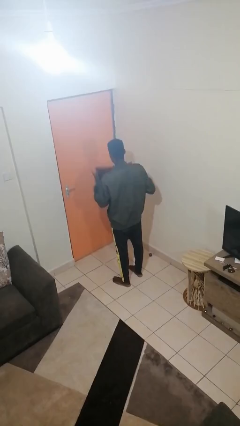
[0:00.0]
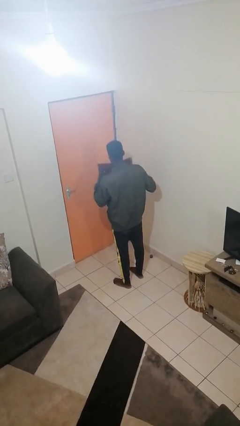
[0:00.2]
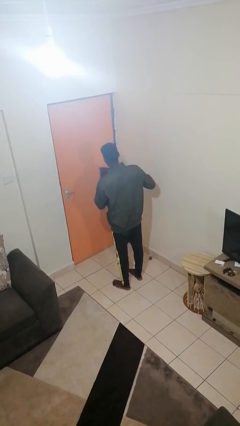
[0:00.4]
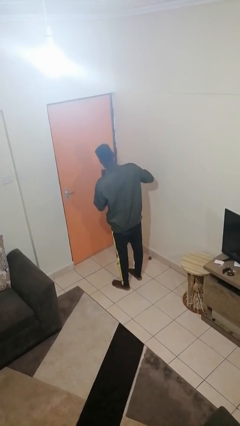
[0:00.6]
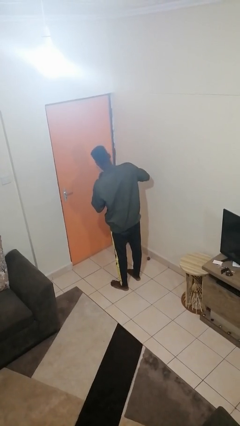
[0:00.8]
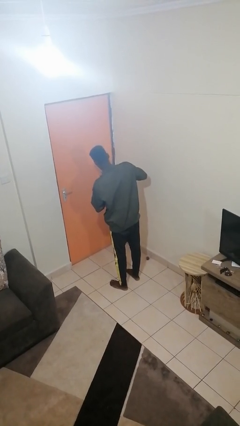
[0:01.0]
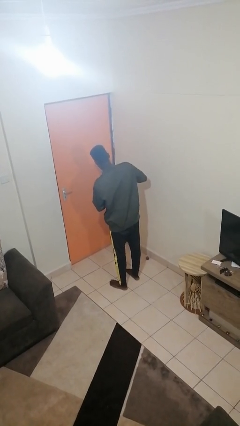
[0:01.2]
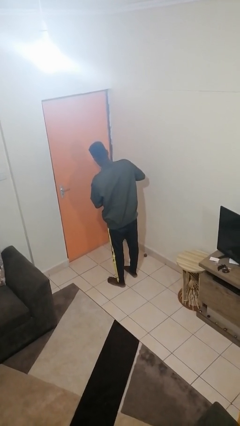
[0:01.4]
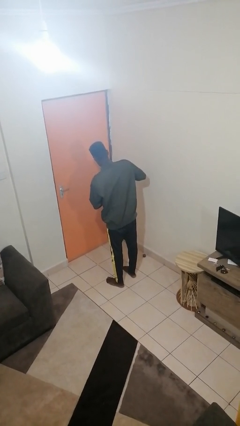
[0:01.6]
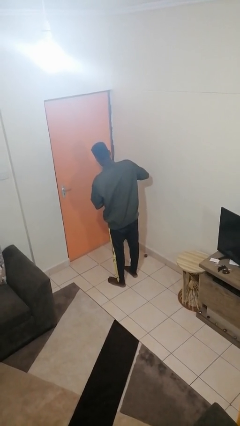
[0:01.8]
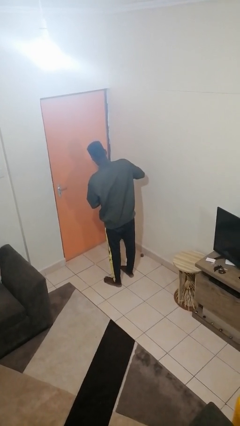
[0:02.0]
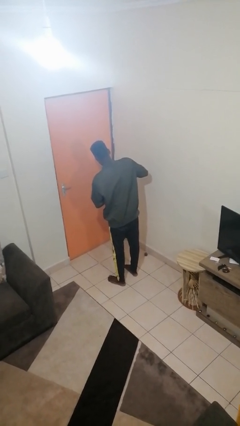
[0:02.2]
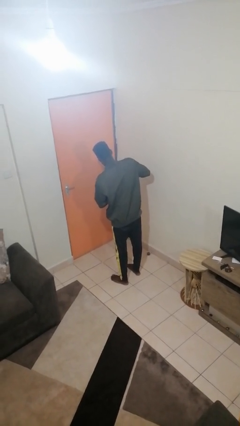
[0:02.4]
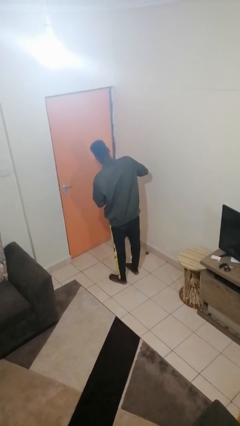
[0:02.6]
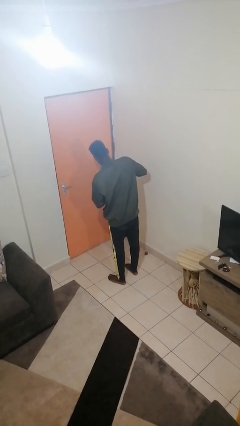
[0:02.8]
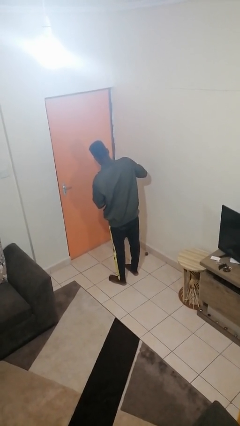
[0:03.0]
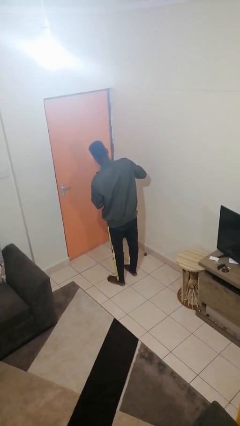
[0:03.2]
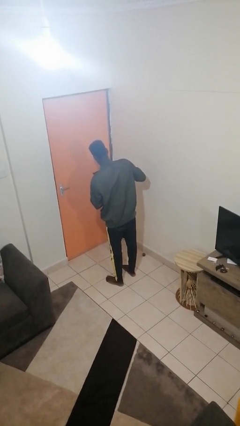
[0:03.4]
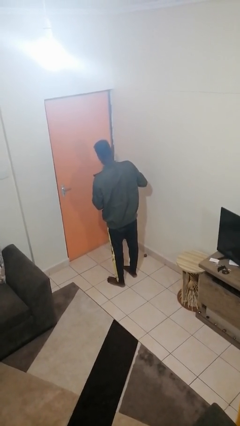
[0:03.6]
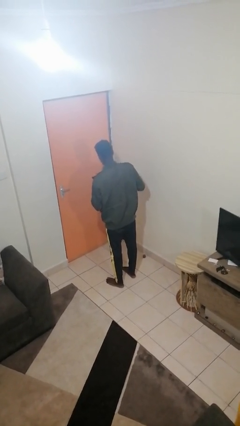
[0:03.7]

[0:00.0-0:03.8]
person squeezes object

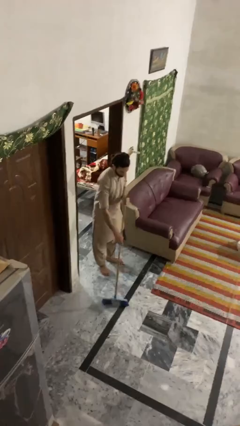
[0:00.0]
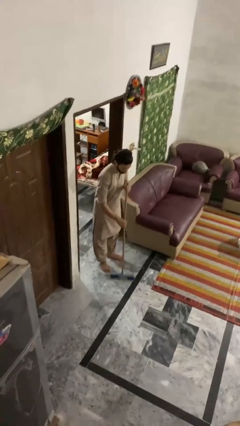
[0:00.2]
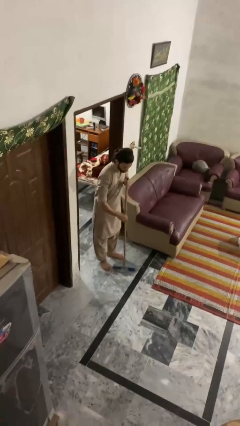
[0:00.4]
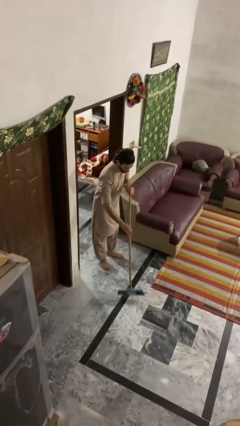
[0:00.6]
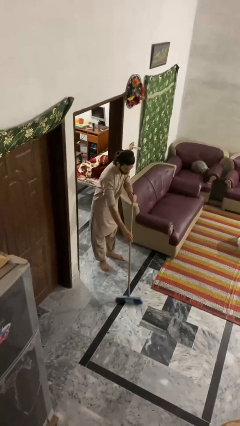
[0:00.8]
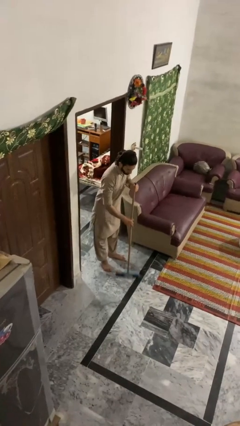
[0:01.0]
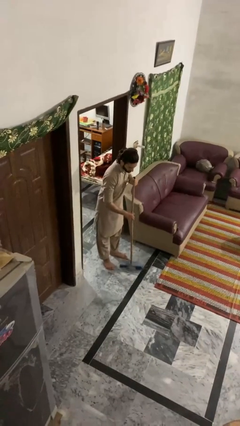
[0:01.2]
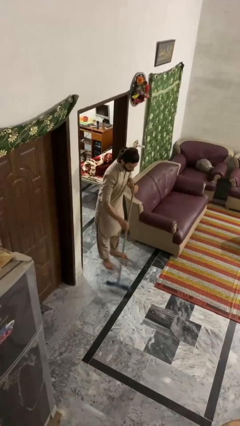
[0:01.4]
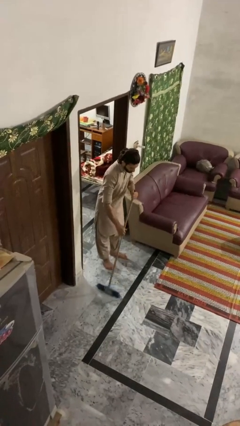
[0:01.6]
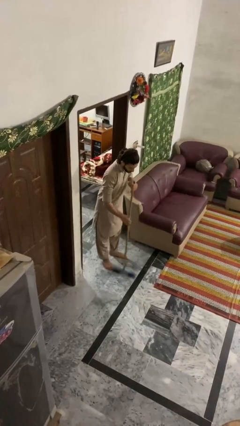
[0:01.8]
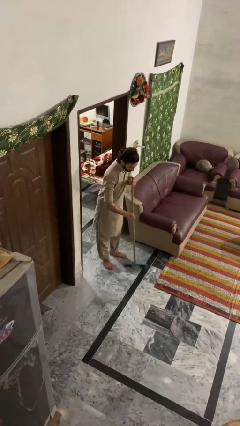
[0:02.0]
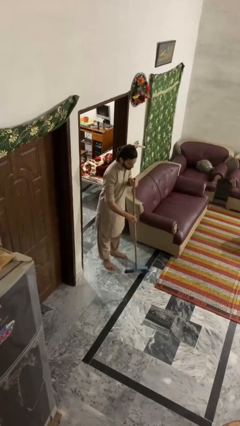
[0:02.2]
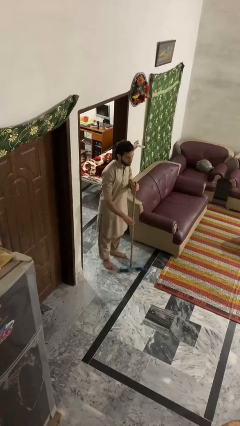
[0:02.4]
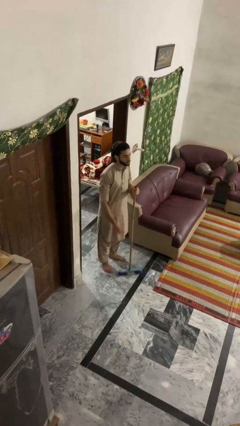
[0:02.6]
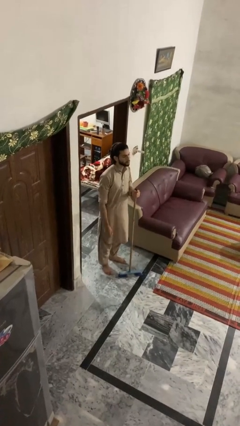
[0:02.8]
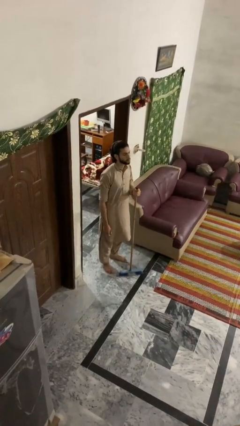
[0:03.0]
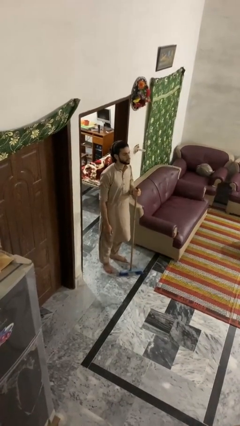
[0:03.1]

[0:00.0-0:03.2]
person sweeps floor

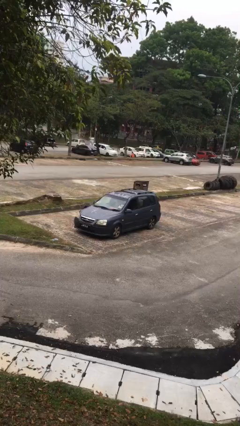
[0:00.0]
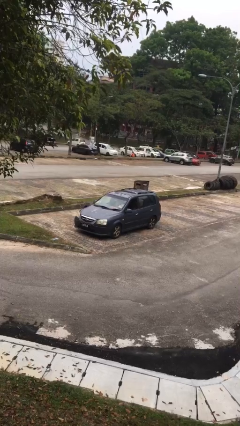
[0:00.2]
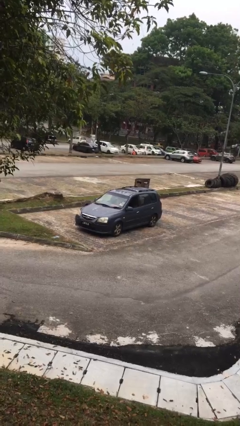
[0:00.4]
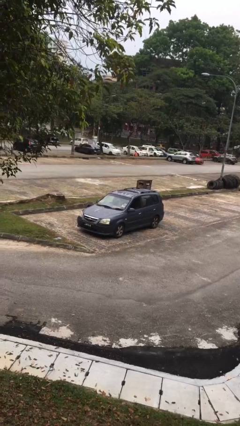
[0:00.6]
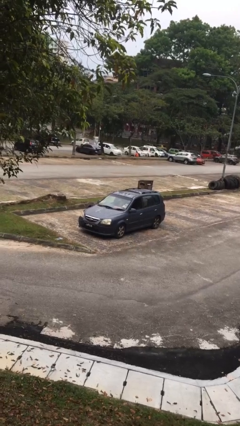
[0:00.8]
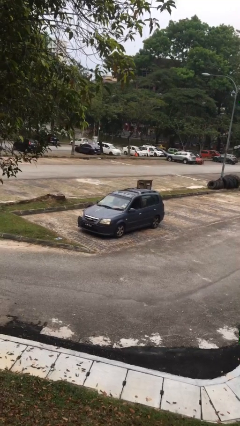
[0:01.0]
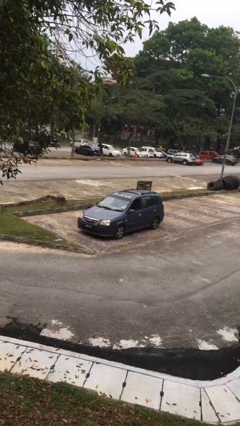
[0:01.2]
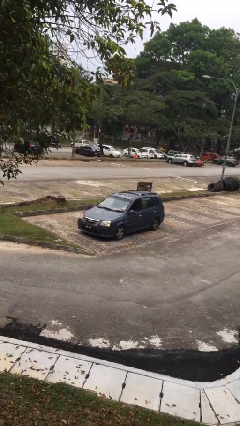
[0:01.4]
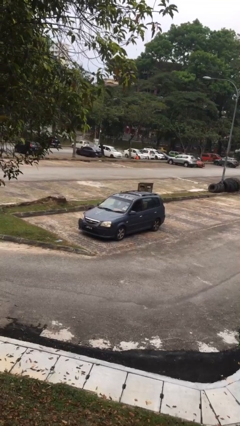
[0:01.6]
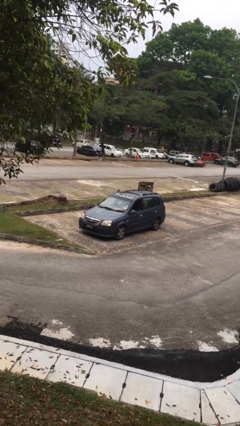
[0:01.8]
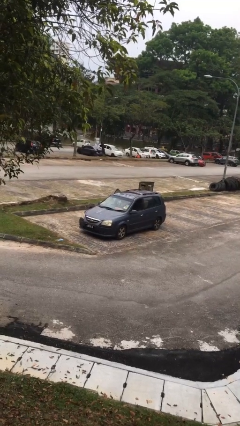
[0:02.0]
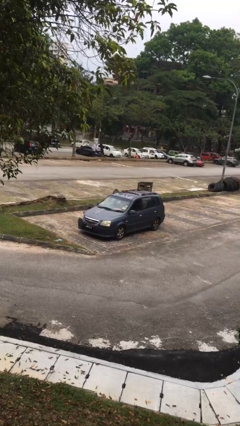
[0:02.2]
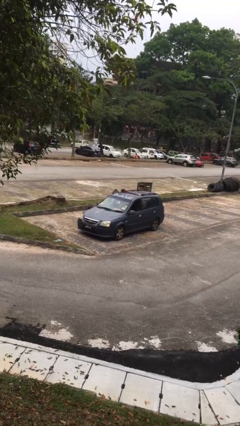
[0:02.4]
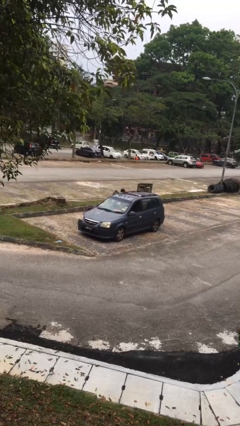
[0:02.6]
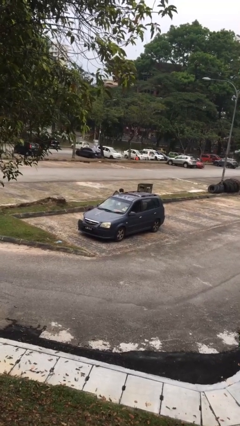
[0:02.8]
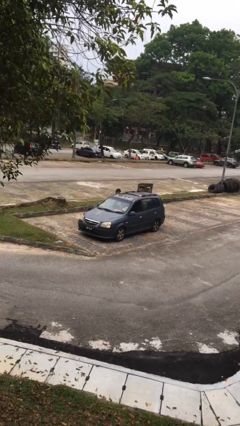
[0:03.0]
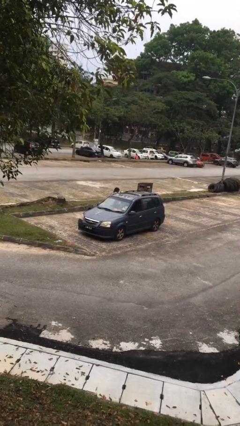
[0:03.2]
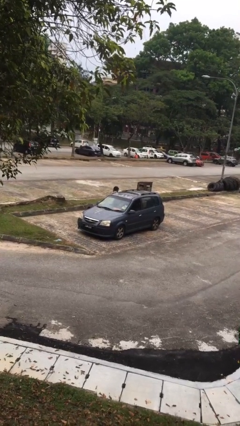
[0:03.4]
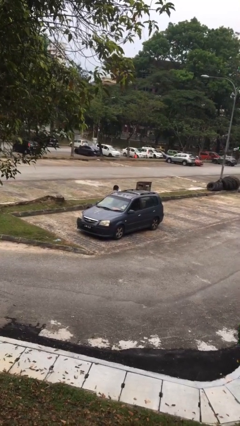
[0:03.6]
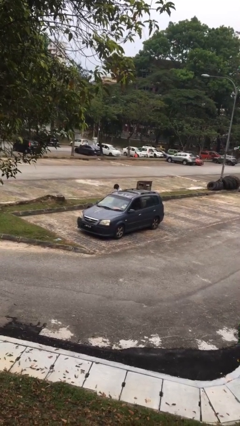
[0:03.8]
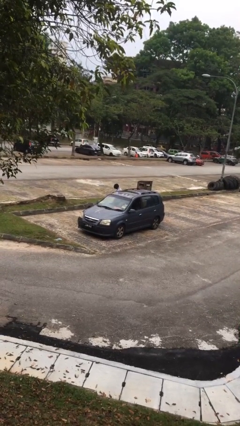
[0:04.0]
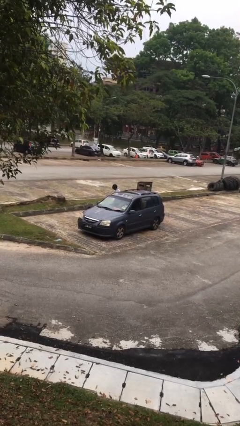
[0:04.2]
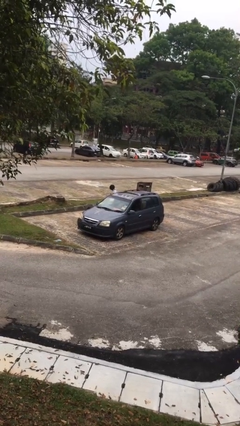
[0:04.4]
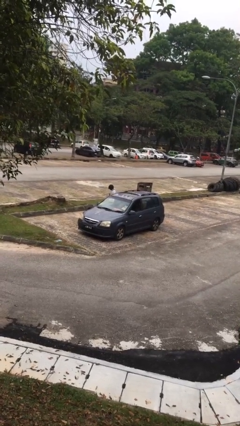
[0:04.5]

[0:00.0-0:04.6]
car drops off person

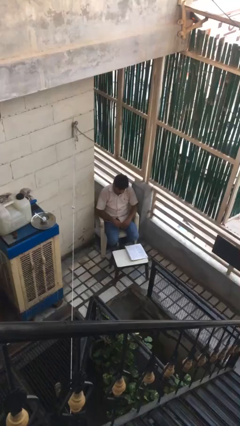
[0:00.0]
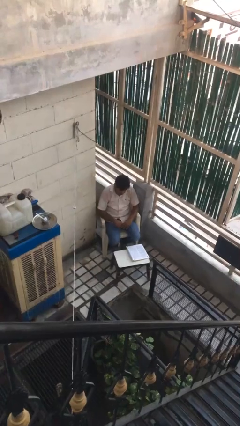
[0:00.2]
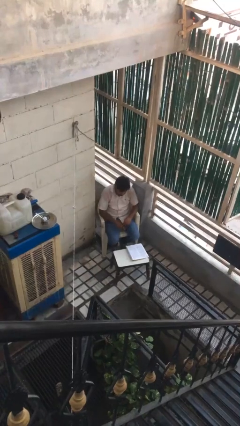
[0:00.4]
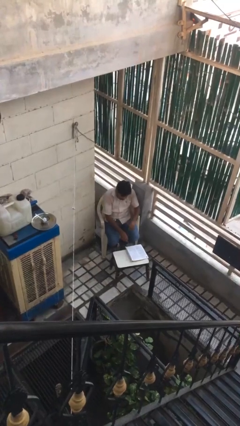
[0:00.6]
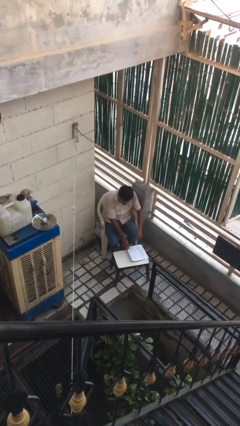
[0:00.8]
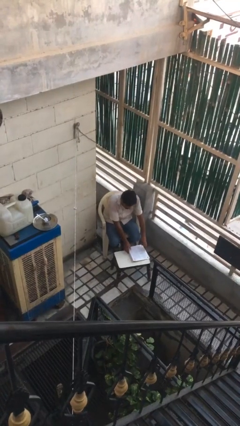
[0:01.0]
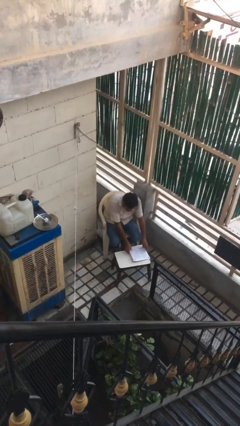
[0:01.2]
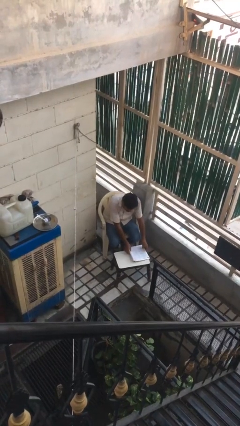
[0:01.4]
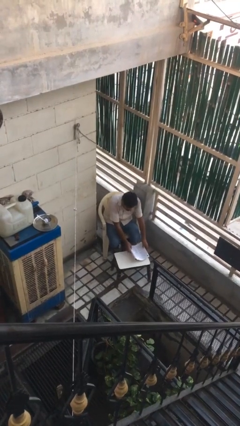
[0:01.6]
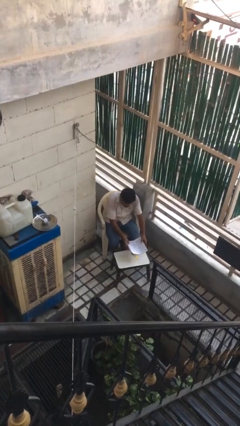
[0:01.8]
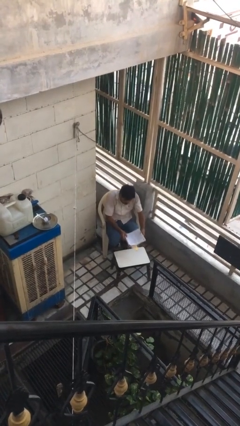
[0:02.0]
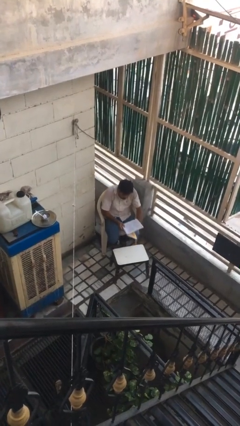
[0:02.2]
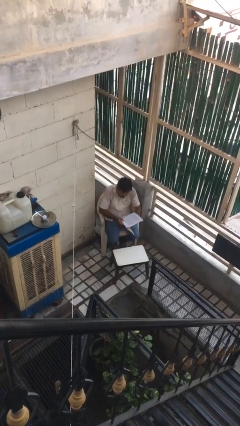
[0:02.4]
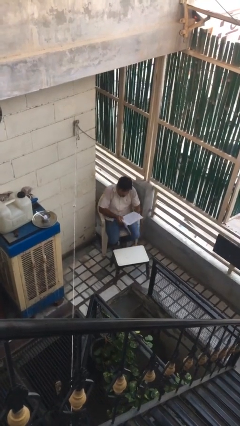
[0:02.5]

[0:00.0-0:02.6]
person picks up object from table

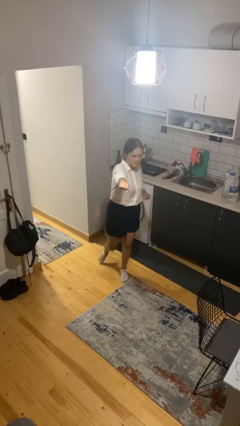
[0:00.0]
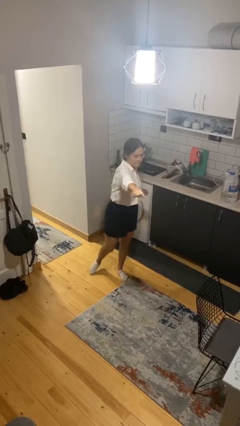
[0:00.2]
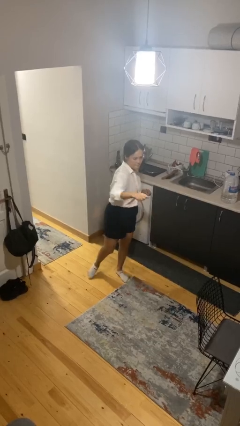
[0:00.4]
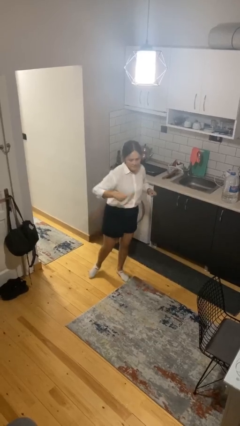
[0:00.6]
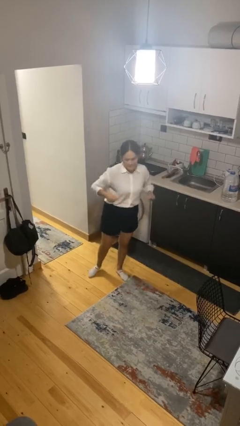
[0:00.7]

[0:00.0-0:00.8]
person karate chop

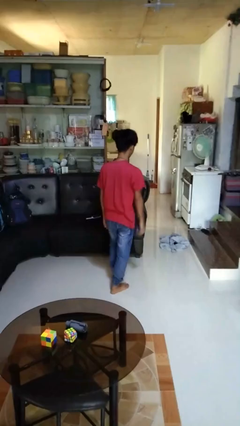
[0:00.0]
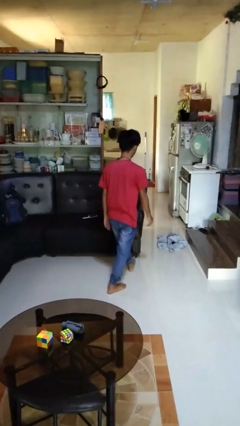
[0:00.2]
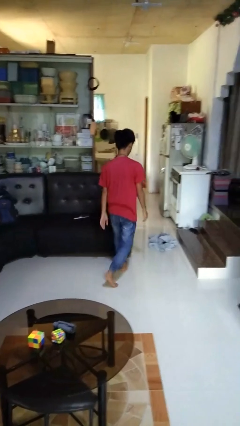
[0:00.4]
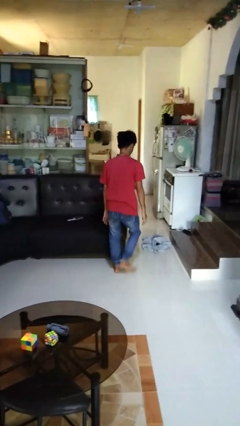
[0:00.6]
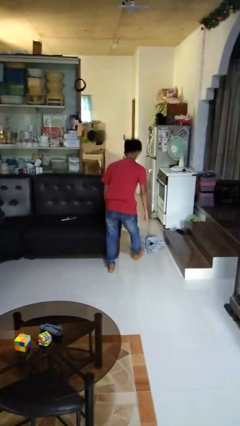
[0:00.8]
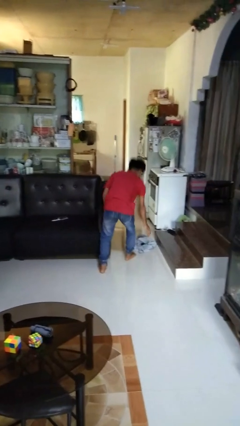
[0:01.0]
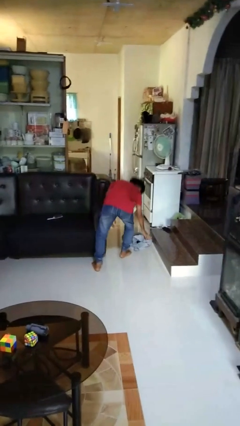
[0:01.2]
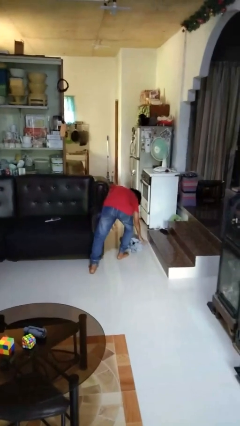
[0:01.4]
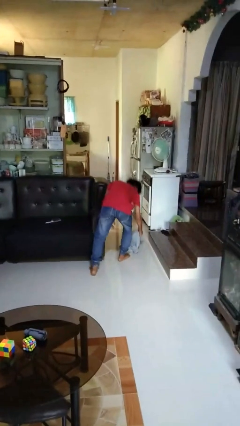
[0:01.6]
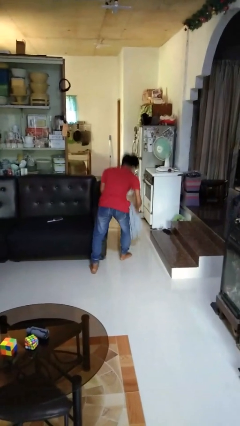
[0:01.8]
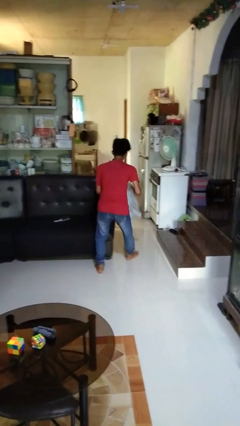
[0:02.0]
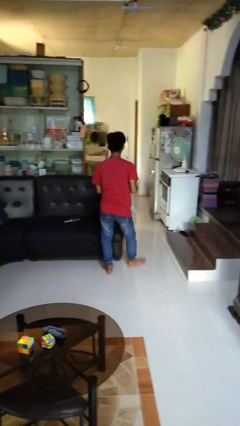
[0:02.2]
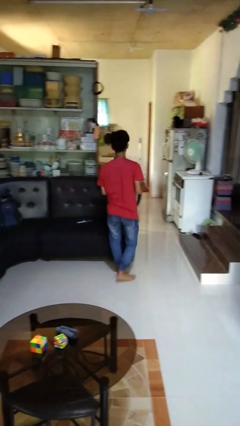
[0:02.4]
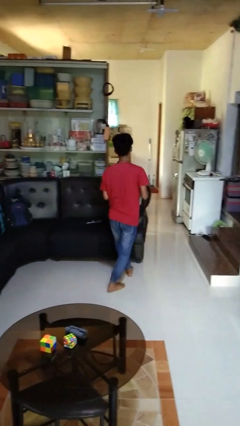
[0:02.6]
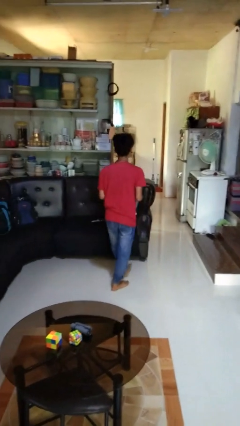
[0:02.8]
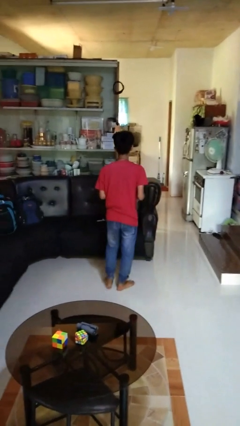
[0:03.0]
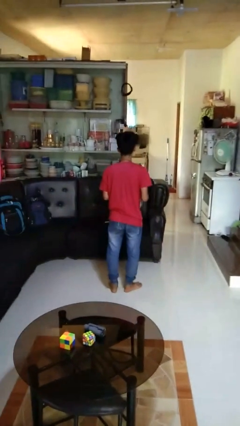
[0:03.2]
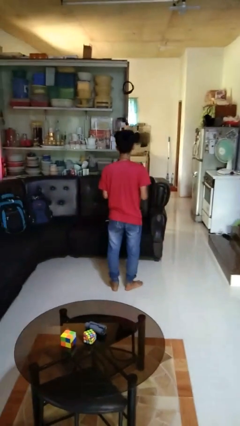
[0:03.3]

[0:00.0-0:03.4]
person picks up object from floor
